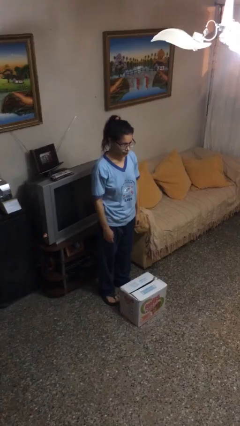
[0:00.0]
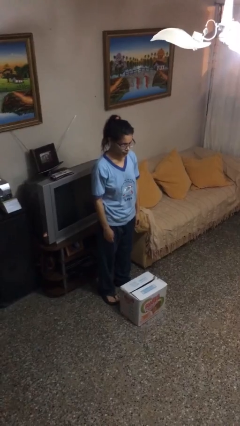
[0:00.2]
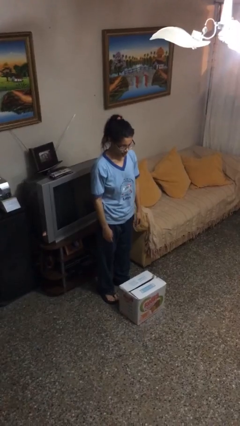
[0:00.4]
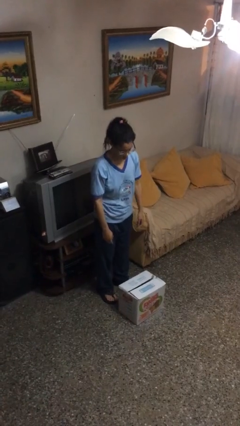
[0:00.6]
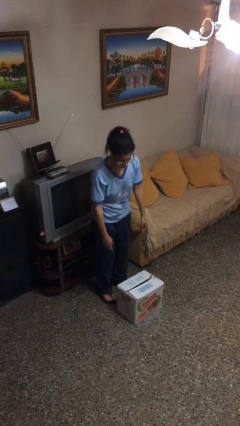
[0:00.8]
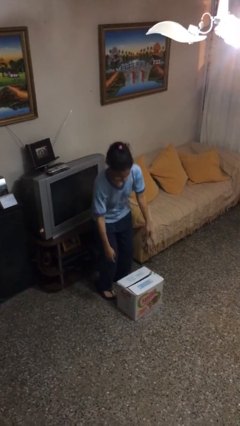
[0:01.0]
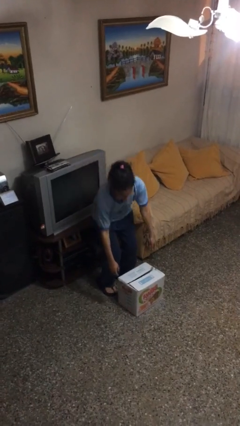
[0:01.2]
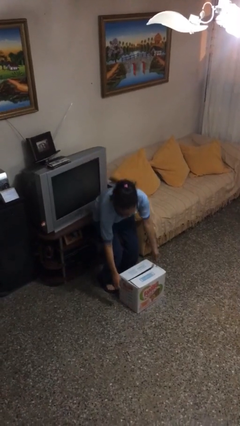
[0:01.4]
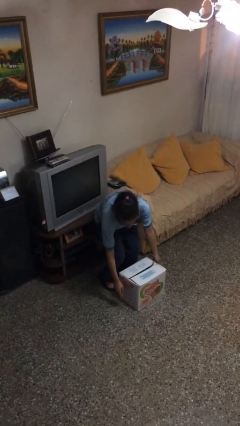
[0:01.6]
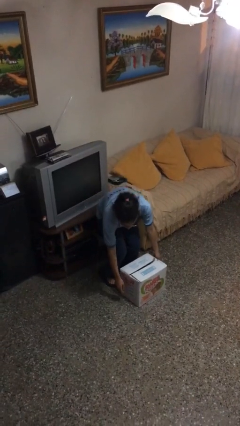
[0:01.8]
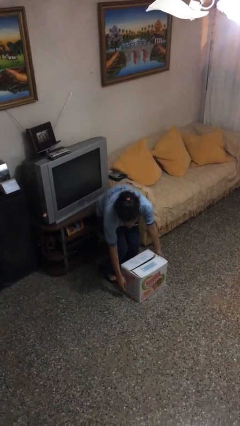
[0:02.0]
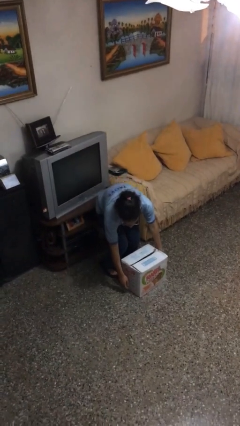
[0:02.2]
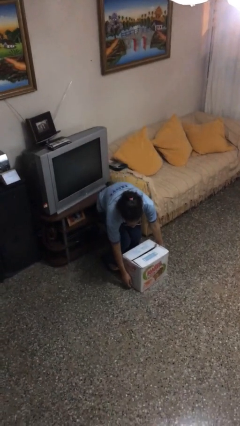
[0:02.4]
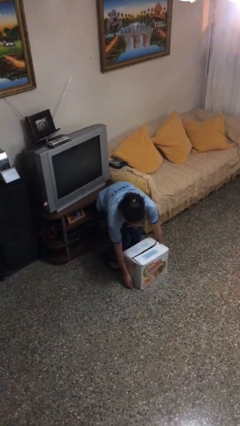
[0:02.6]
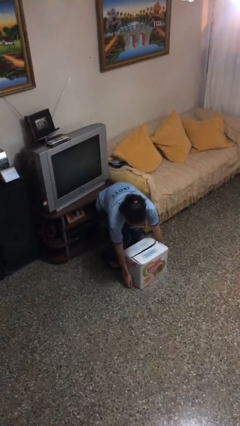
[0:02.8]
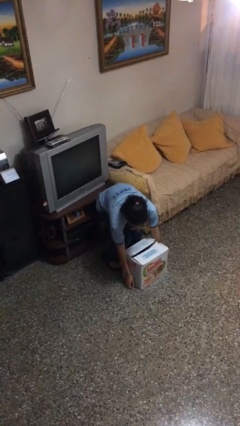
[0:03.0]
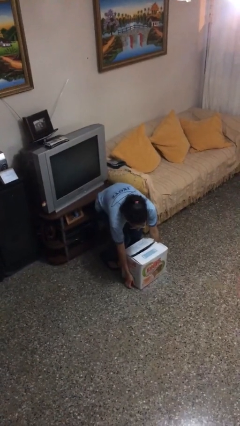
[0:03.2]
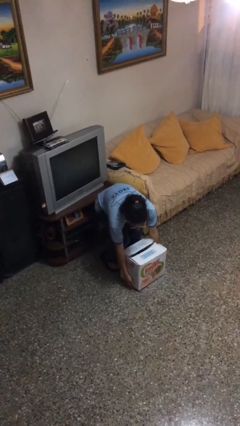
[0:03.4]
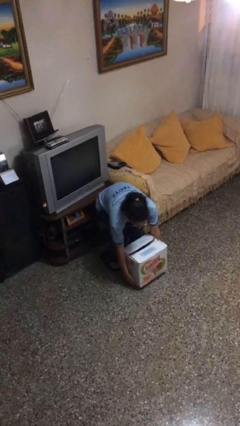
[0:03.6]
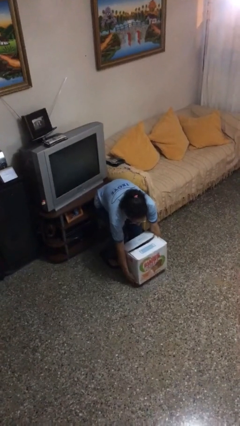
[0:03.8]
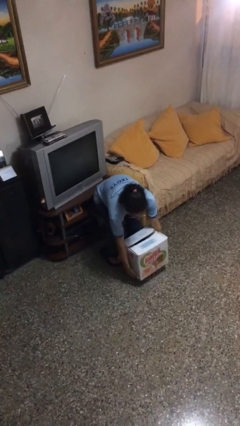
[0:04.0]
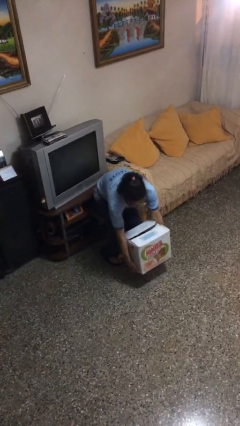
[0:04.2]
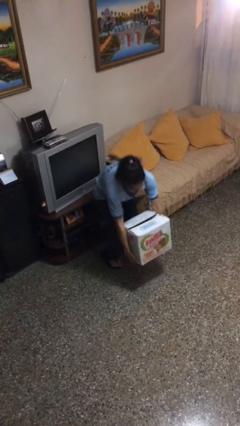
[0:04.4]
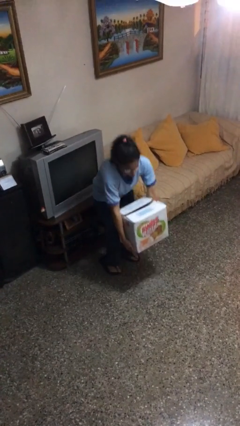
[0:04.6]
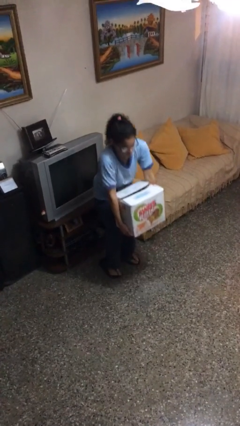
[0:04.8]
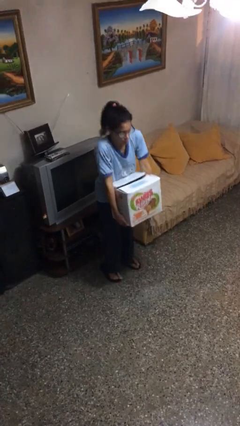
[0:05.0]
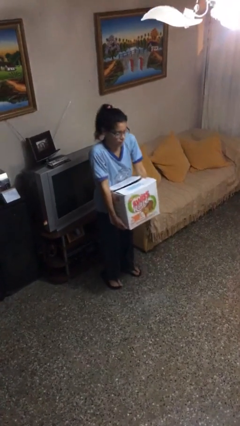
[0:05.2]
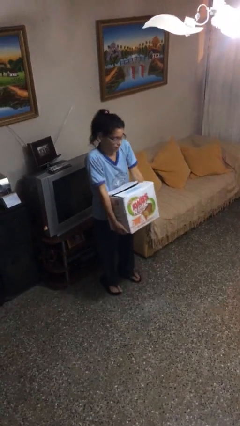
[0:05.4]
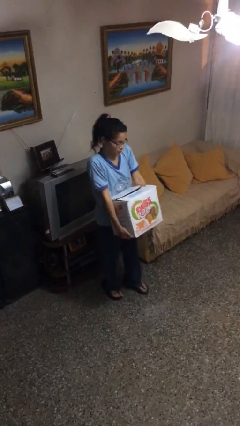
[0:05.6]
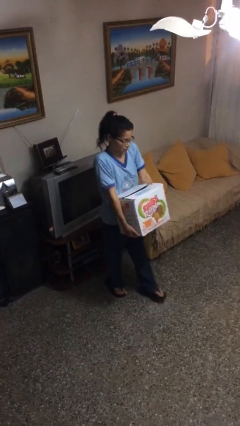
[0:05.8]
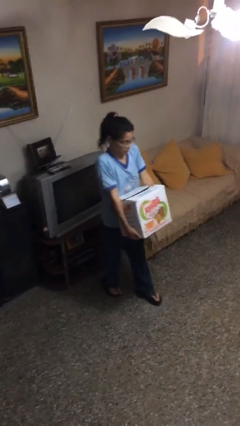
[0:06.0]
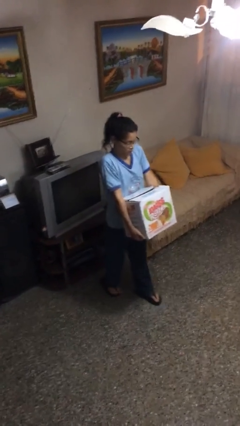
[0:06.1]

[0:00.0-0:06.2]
person picks up object from floor

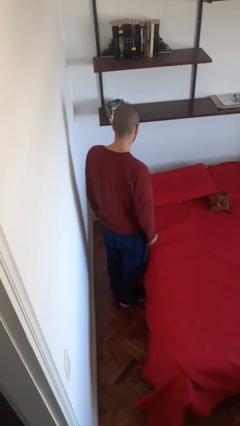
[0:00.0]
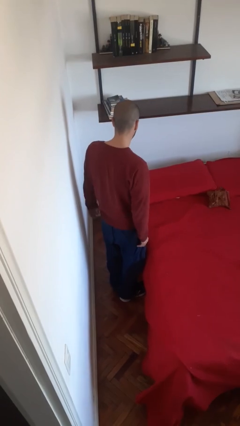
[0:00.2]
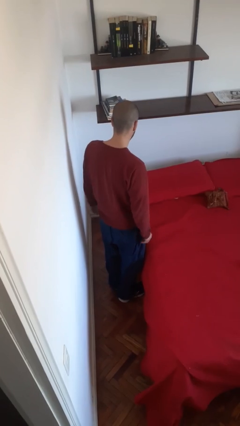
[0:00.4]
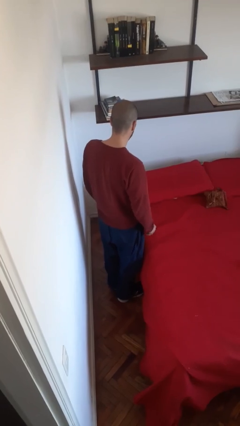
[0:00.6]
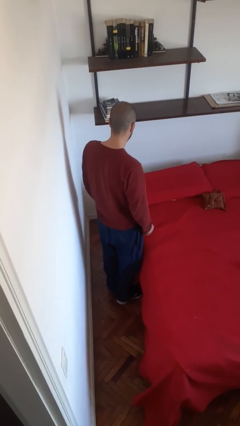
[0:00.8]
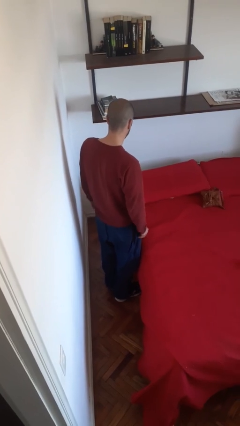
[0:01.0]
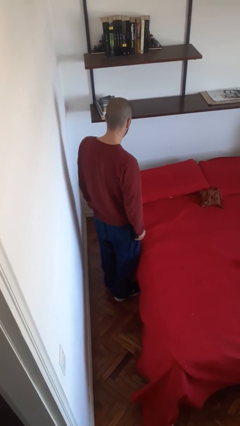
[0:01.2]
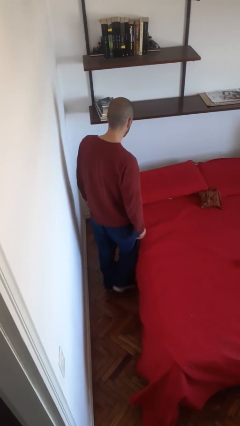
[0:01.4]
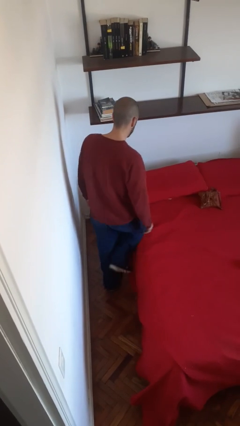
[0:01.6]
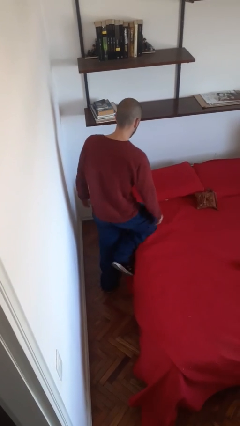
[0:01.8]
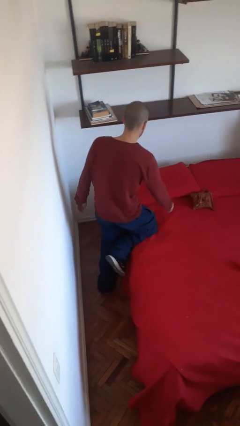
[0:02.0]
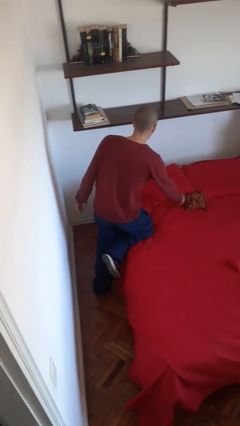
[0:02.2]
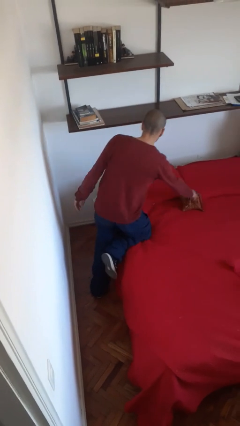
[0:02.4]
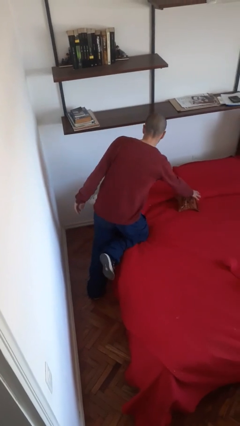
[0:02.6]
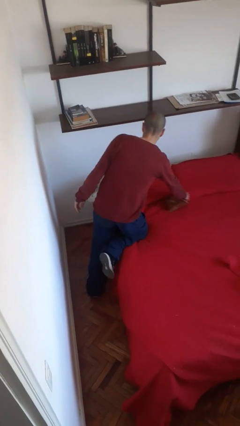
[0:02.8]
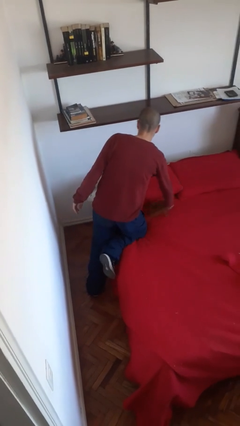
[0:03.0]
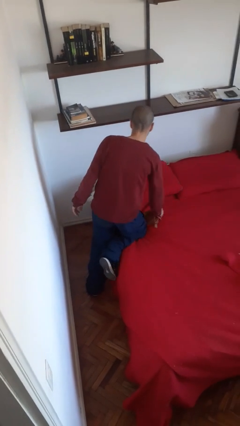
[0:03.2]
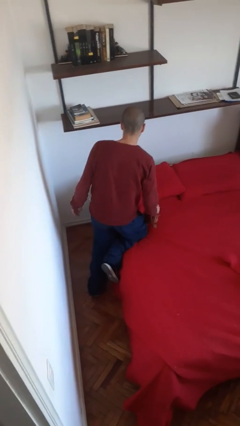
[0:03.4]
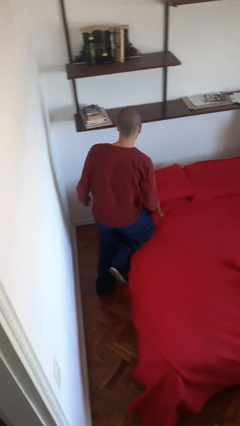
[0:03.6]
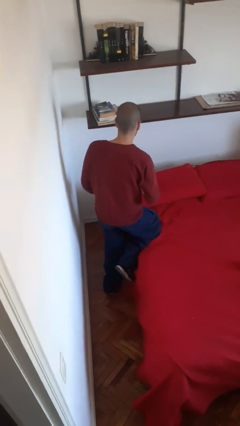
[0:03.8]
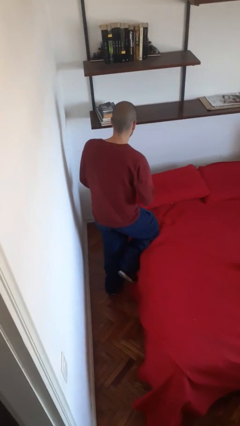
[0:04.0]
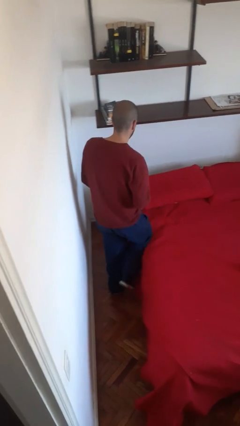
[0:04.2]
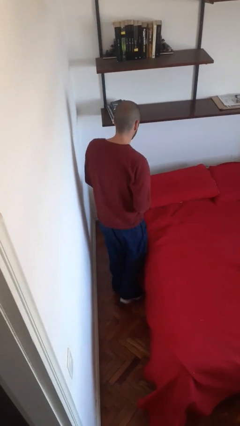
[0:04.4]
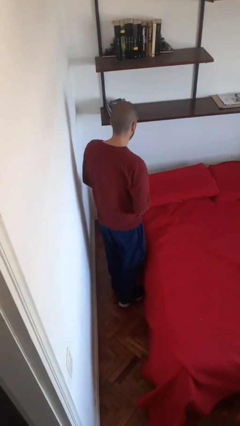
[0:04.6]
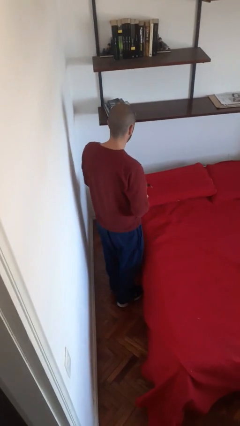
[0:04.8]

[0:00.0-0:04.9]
person picks up object from bed

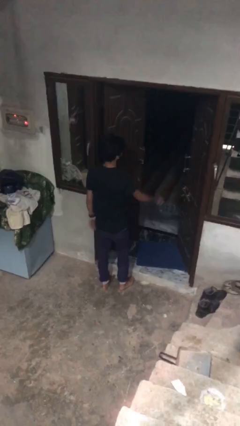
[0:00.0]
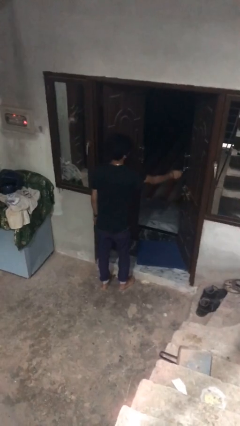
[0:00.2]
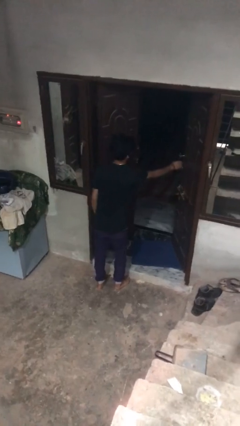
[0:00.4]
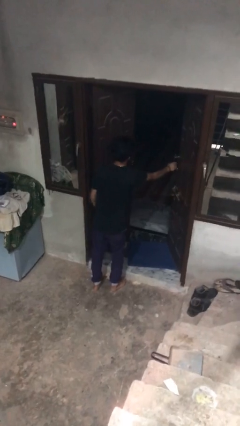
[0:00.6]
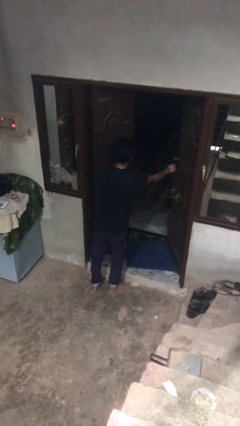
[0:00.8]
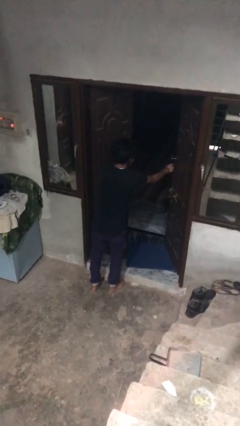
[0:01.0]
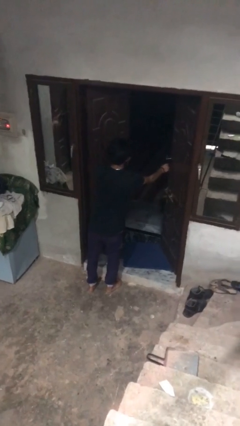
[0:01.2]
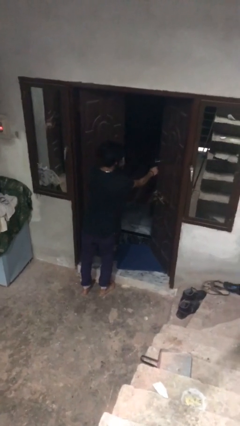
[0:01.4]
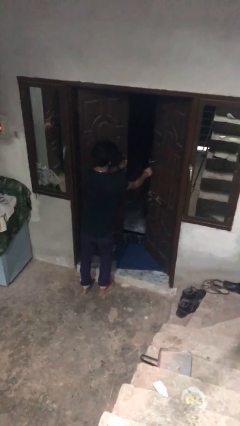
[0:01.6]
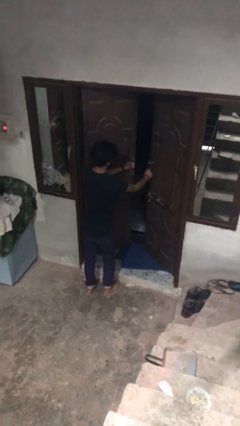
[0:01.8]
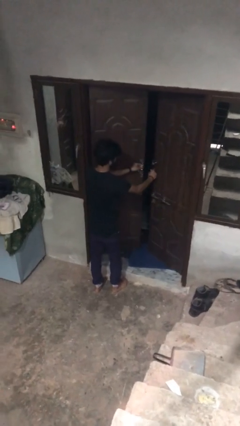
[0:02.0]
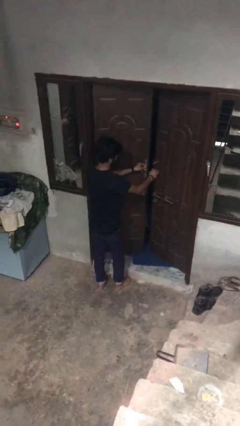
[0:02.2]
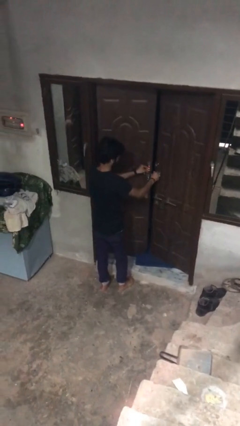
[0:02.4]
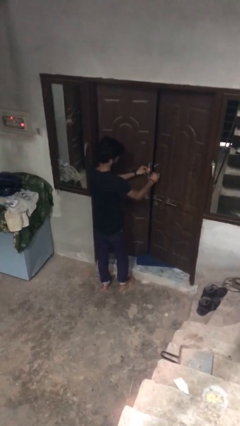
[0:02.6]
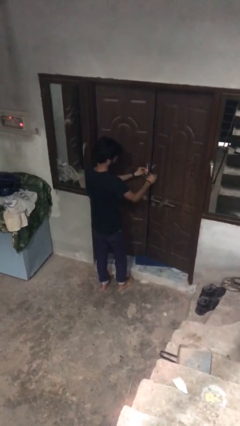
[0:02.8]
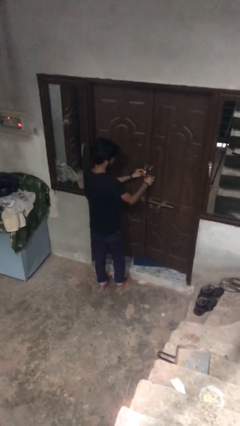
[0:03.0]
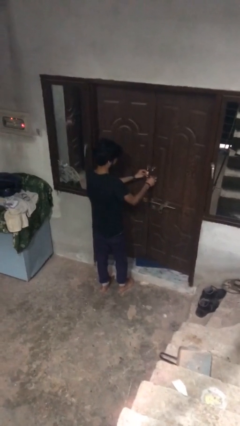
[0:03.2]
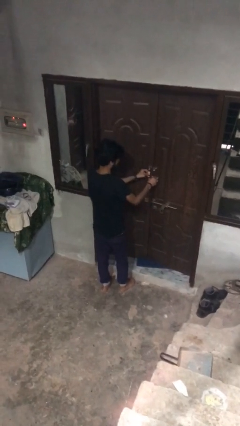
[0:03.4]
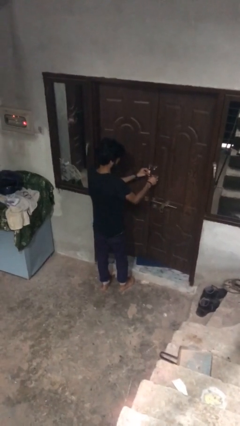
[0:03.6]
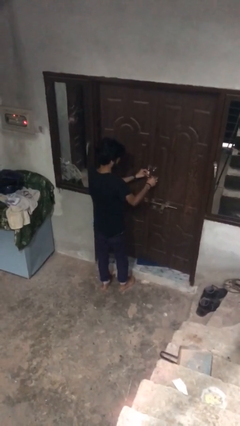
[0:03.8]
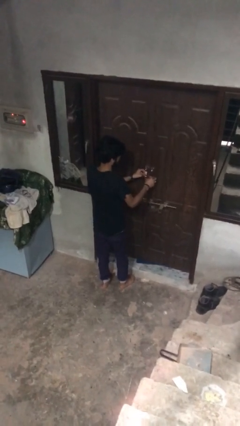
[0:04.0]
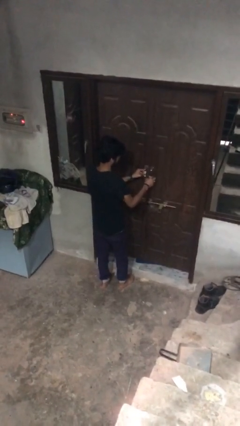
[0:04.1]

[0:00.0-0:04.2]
person closes facility door

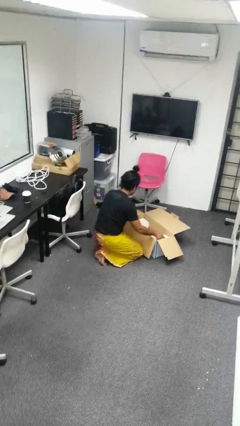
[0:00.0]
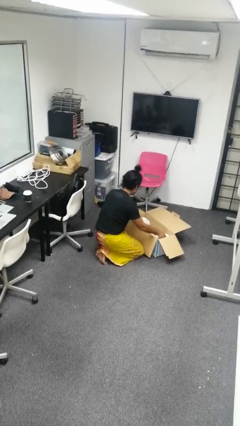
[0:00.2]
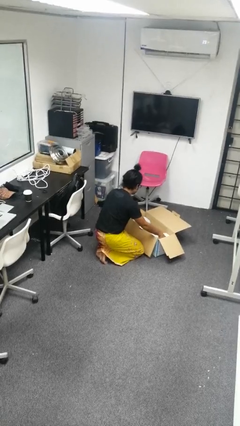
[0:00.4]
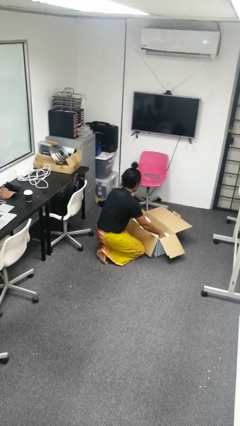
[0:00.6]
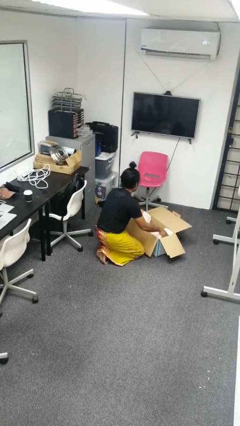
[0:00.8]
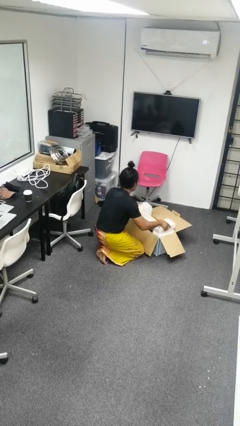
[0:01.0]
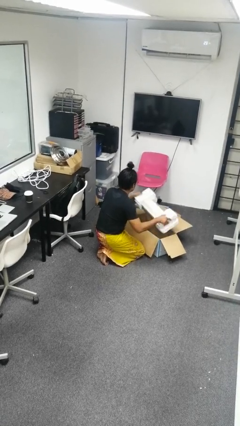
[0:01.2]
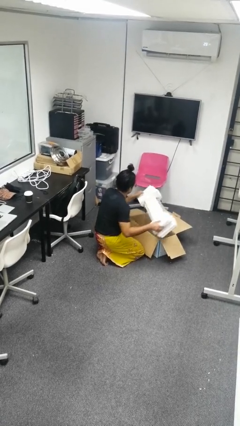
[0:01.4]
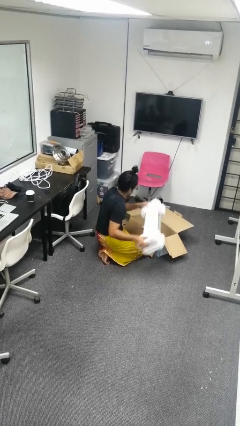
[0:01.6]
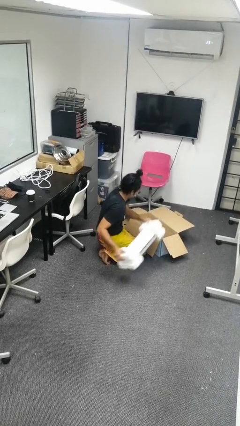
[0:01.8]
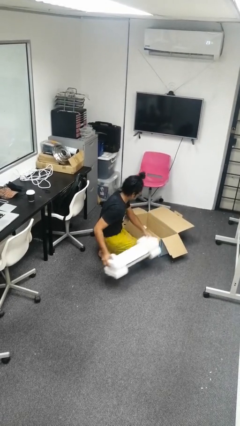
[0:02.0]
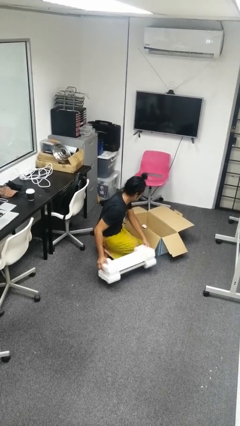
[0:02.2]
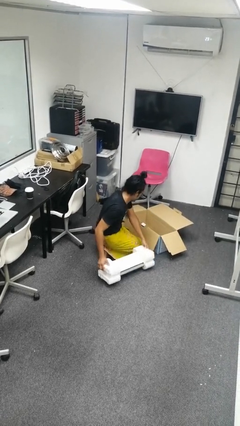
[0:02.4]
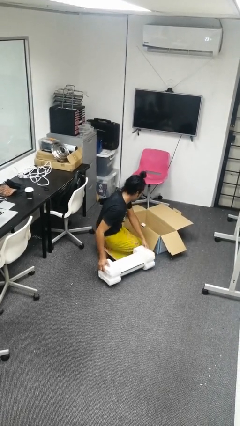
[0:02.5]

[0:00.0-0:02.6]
person takes object from box
